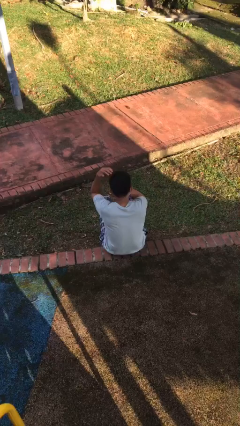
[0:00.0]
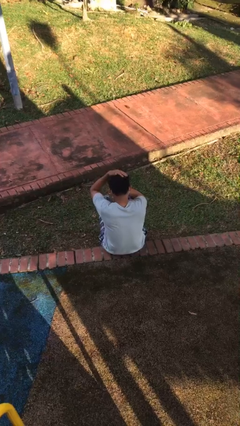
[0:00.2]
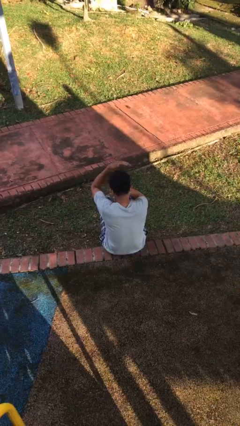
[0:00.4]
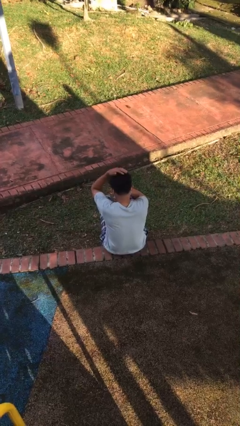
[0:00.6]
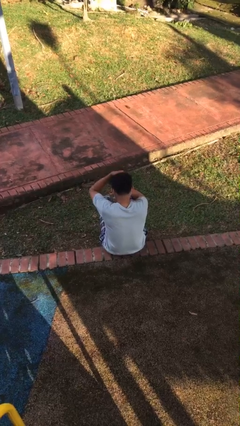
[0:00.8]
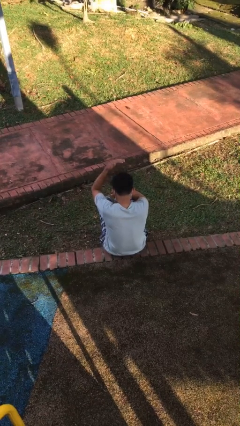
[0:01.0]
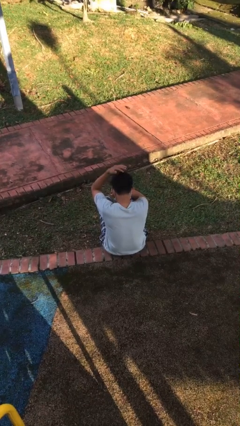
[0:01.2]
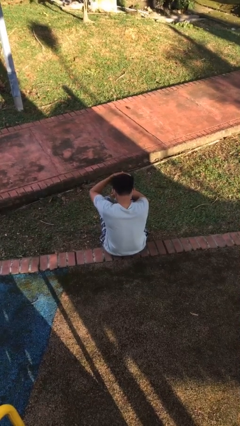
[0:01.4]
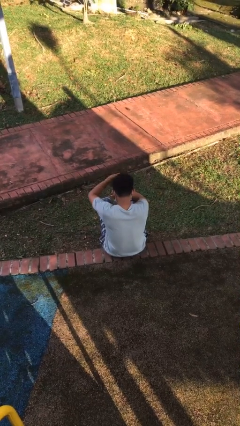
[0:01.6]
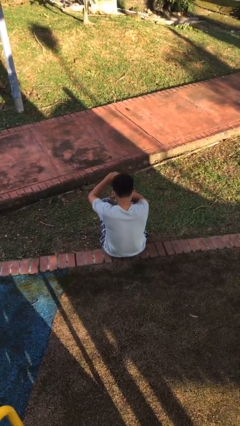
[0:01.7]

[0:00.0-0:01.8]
person pats head

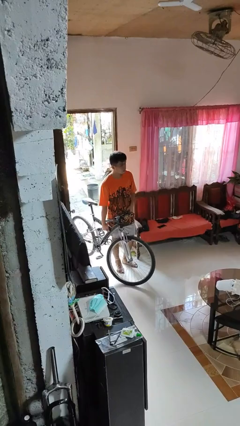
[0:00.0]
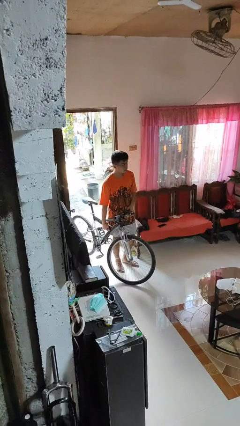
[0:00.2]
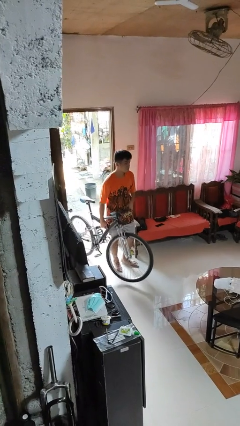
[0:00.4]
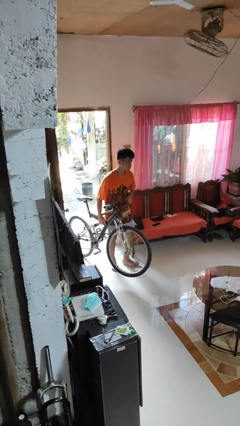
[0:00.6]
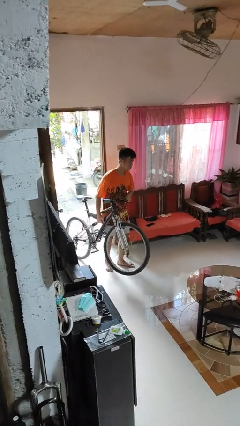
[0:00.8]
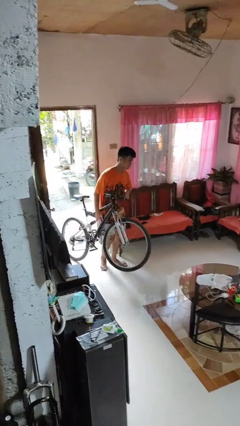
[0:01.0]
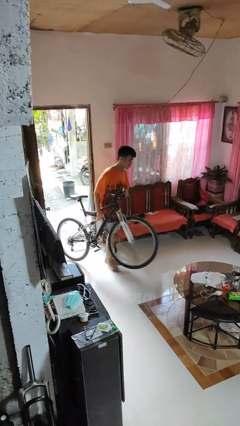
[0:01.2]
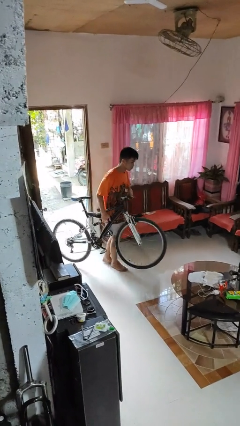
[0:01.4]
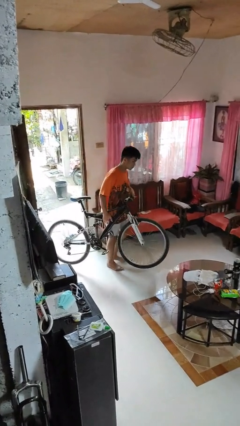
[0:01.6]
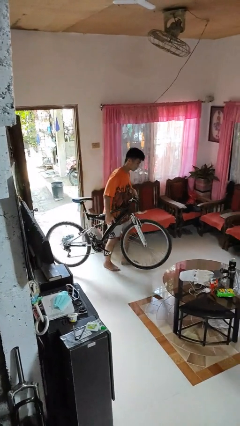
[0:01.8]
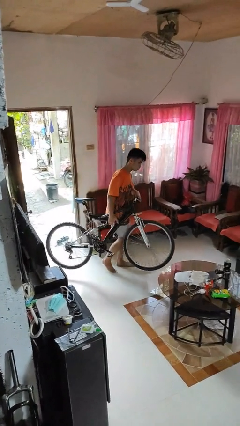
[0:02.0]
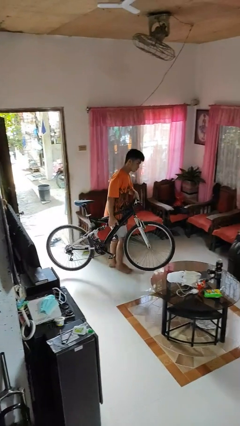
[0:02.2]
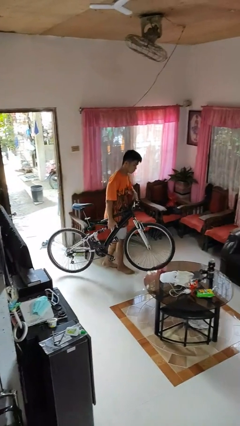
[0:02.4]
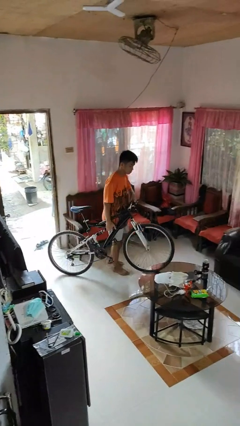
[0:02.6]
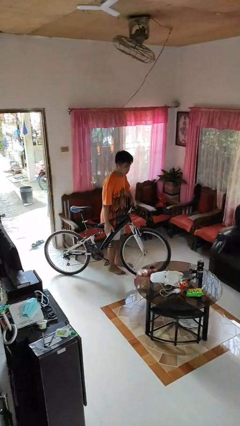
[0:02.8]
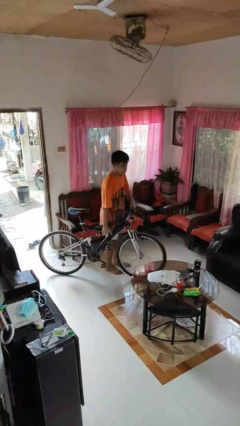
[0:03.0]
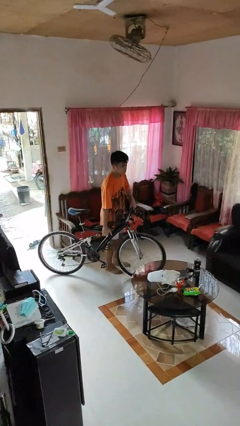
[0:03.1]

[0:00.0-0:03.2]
person carries bicycle

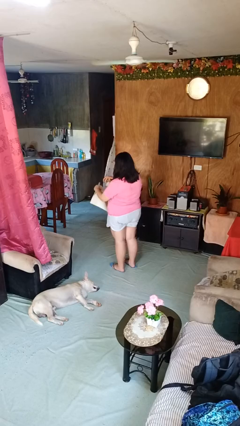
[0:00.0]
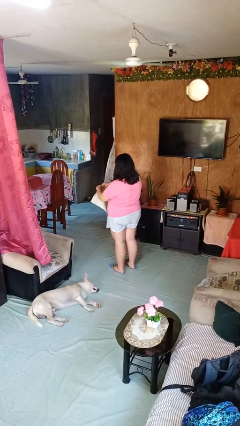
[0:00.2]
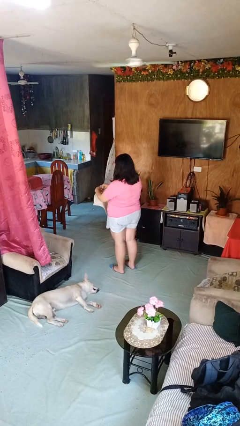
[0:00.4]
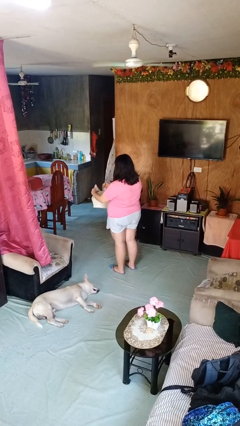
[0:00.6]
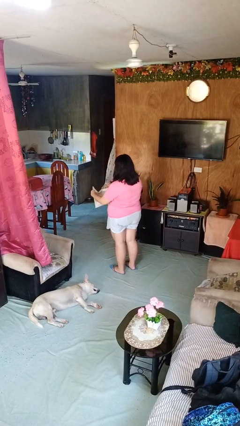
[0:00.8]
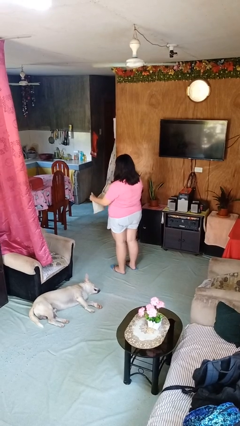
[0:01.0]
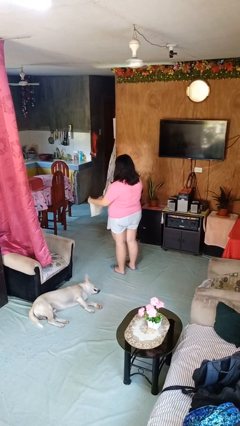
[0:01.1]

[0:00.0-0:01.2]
person tears paper

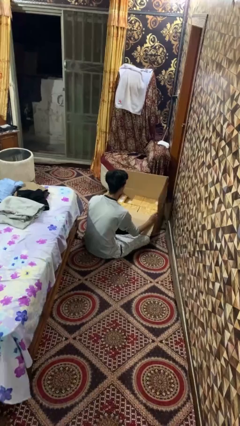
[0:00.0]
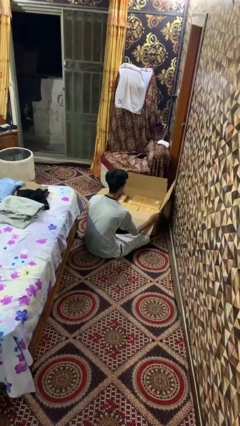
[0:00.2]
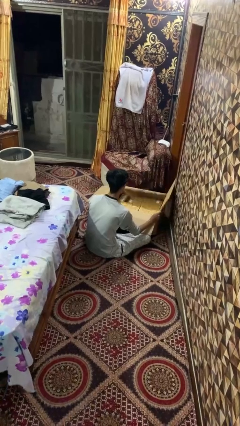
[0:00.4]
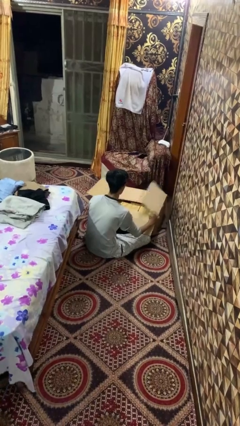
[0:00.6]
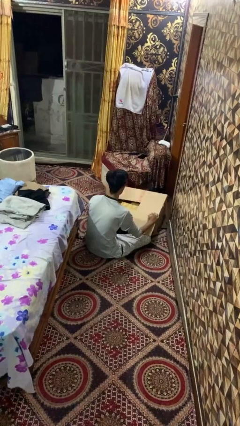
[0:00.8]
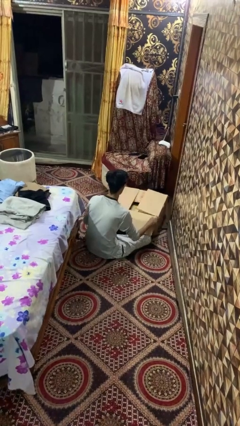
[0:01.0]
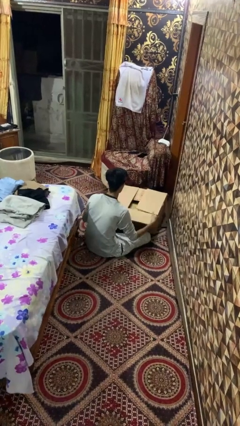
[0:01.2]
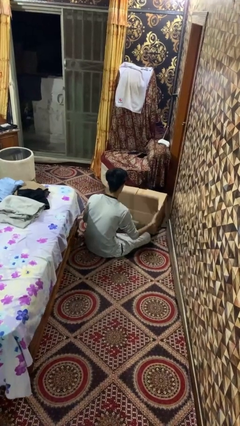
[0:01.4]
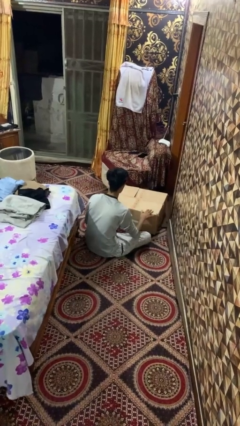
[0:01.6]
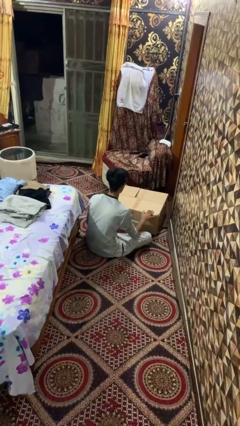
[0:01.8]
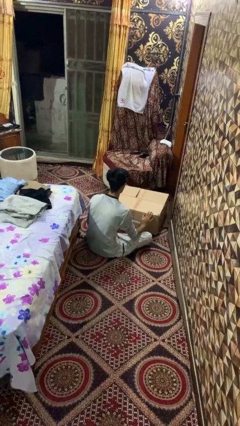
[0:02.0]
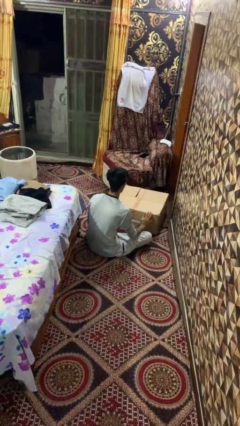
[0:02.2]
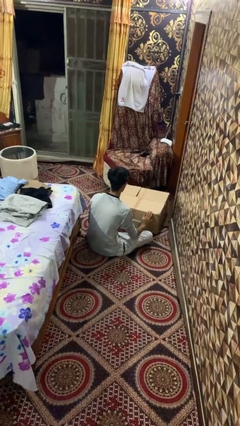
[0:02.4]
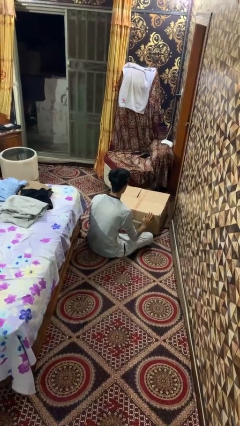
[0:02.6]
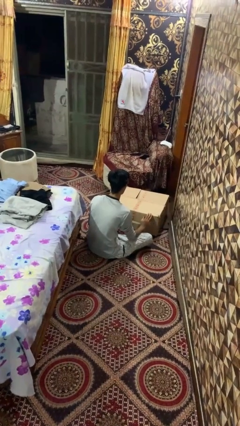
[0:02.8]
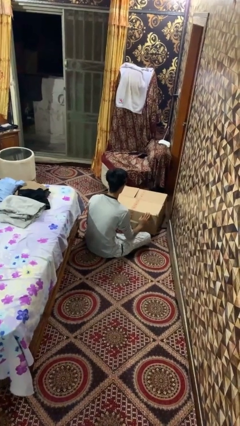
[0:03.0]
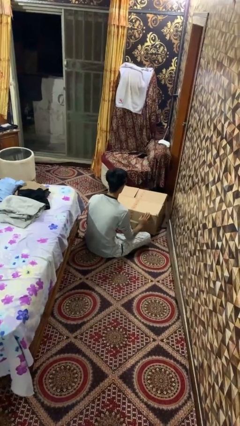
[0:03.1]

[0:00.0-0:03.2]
person closes box

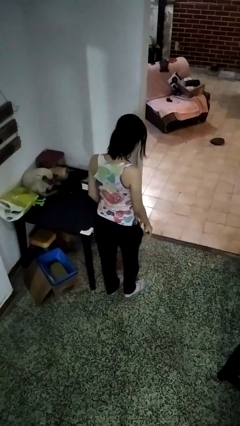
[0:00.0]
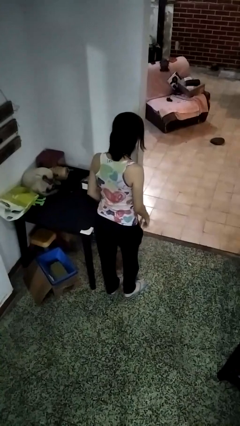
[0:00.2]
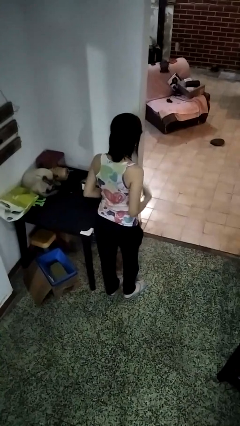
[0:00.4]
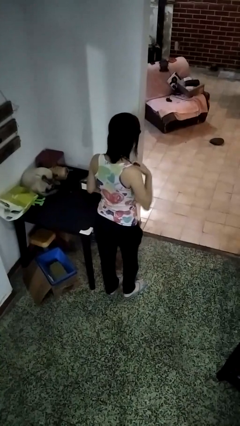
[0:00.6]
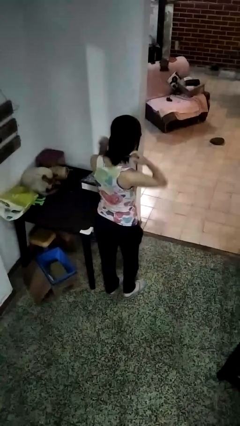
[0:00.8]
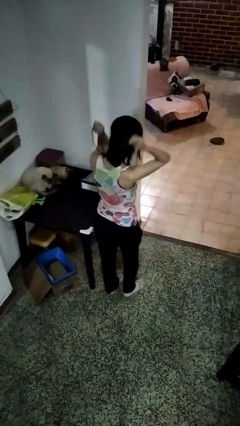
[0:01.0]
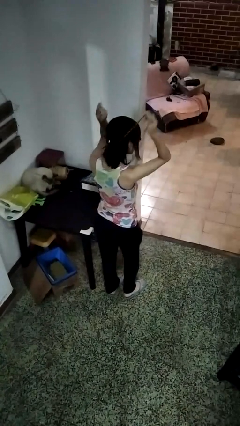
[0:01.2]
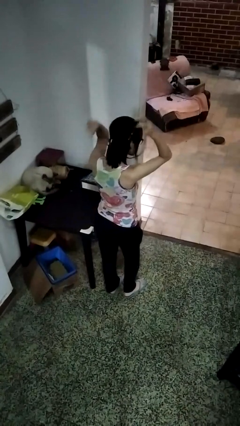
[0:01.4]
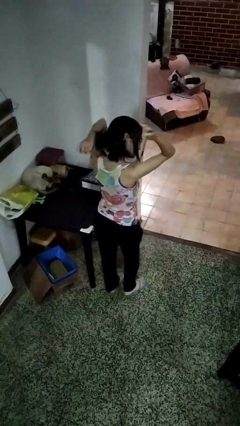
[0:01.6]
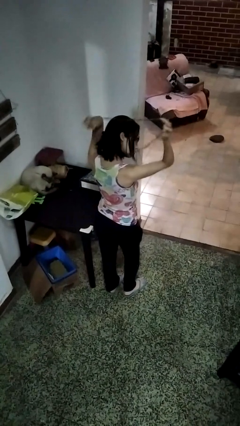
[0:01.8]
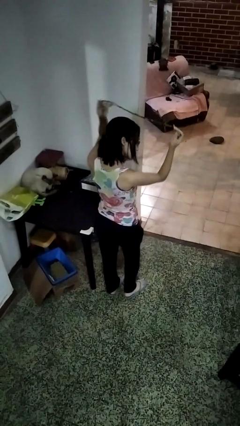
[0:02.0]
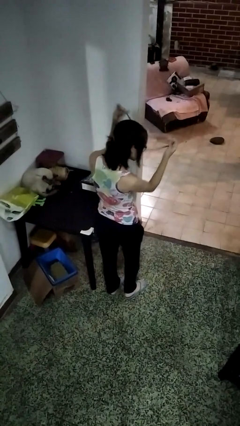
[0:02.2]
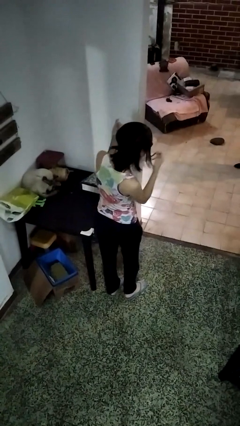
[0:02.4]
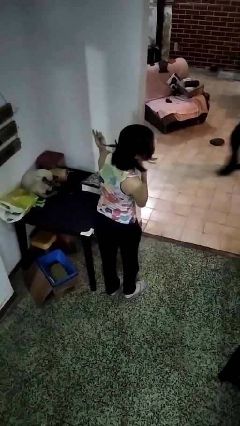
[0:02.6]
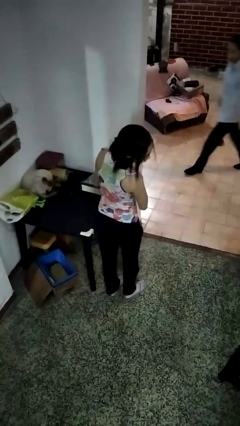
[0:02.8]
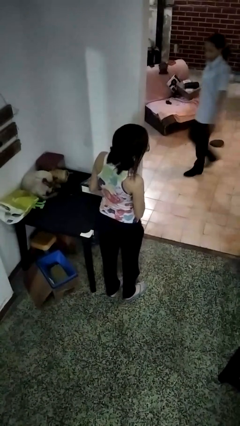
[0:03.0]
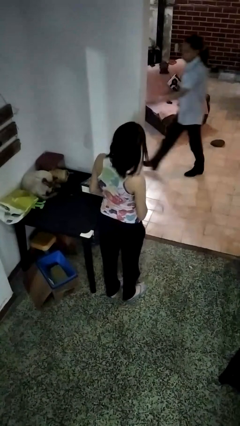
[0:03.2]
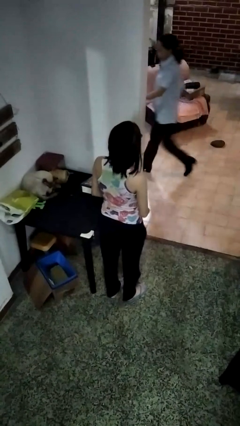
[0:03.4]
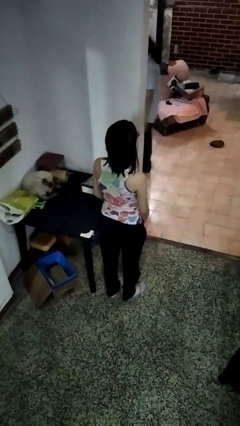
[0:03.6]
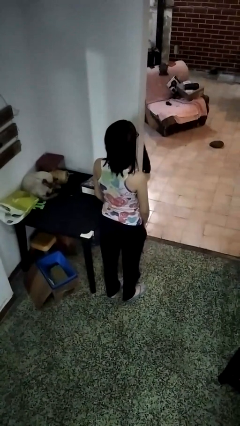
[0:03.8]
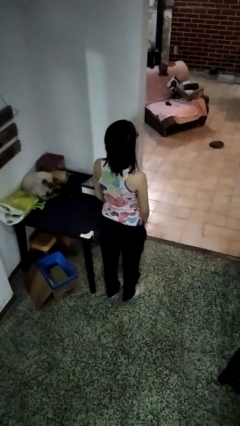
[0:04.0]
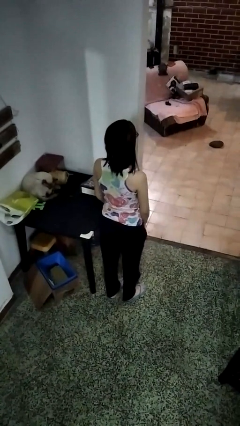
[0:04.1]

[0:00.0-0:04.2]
person takes off necklace

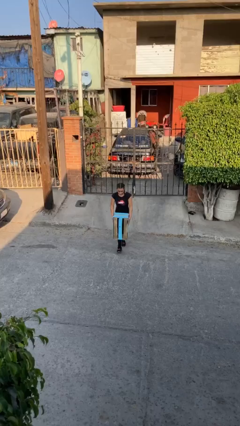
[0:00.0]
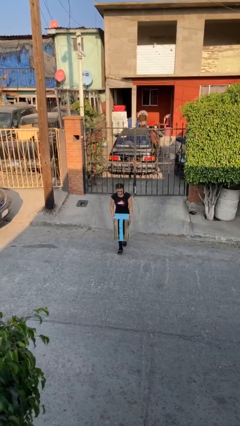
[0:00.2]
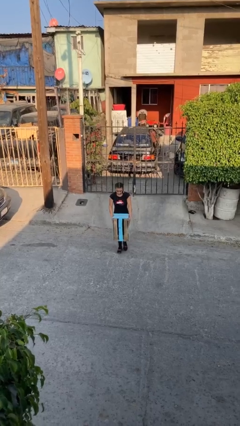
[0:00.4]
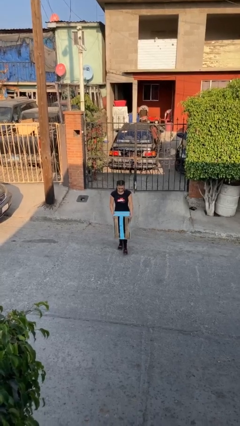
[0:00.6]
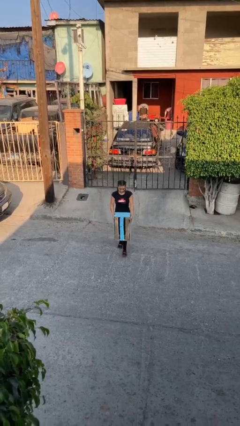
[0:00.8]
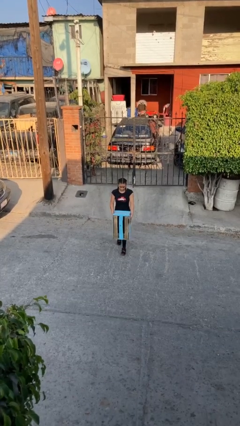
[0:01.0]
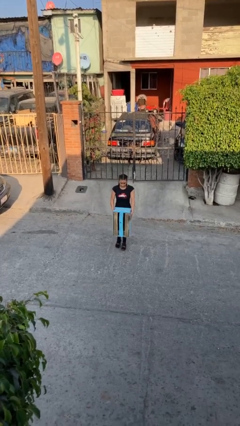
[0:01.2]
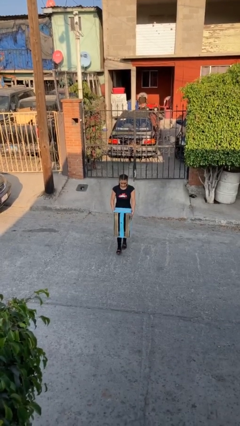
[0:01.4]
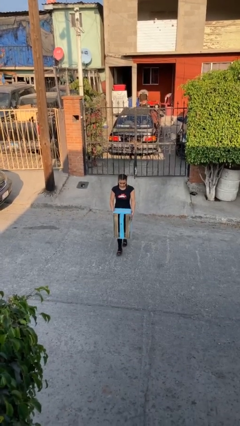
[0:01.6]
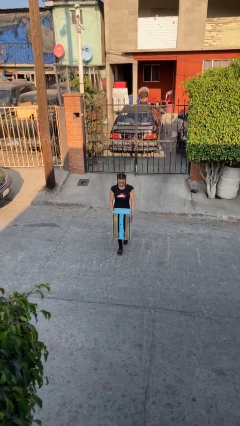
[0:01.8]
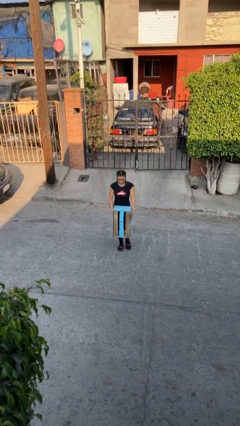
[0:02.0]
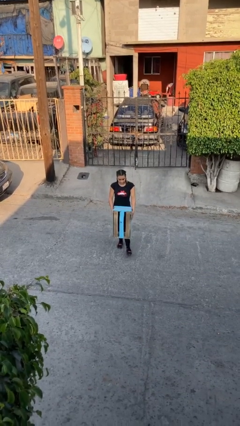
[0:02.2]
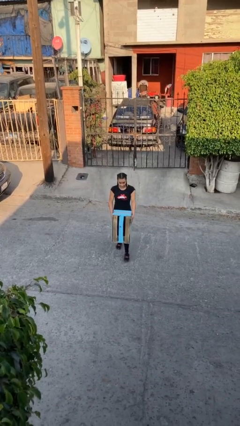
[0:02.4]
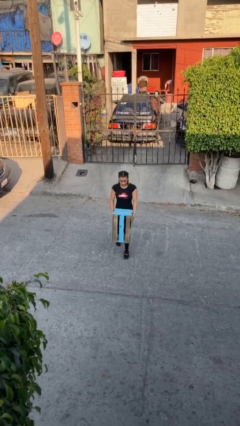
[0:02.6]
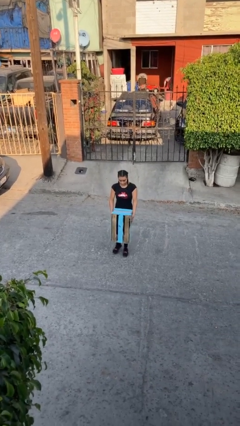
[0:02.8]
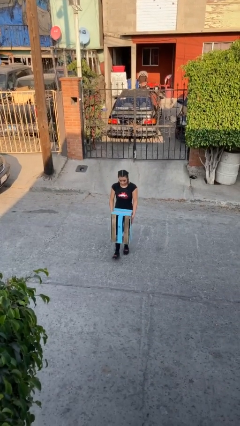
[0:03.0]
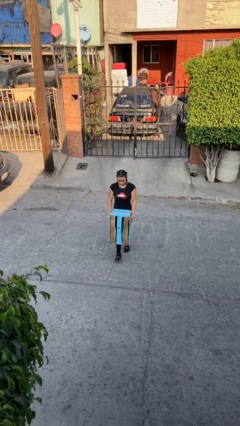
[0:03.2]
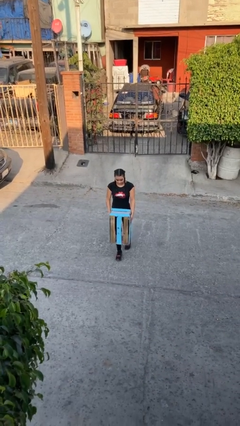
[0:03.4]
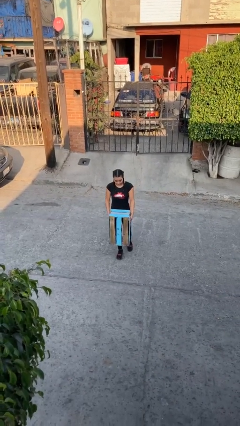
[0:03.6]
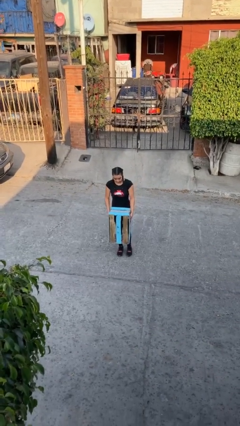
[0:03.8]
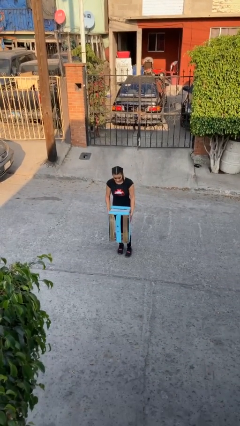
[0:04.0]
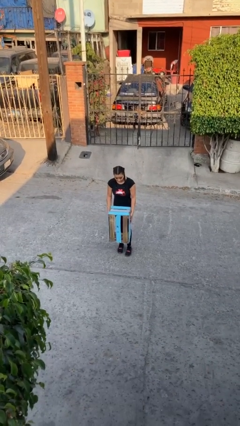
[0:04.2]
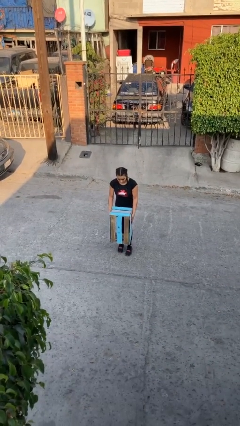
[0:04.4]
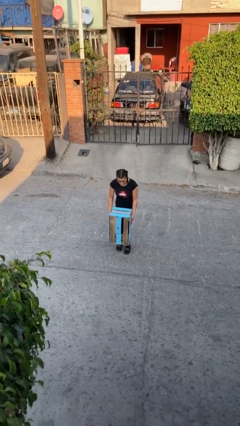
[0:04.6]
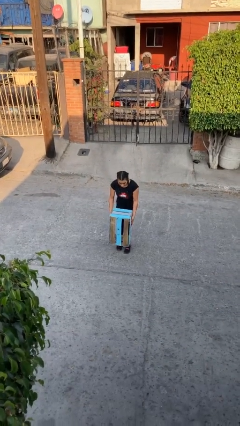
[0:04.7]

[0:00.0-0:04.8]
person carries heavy object
